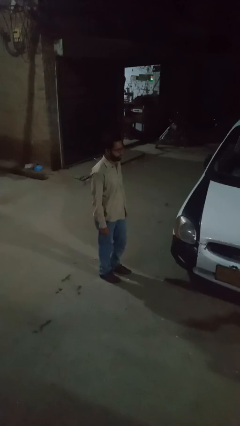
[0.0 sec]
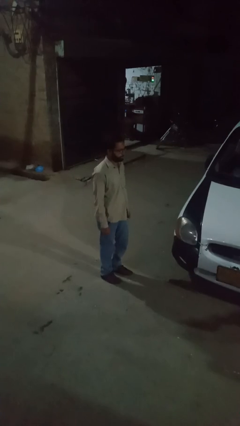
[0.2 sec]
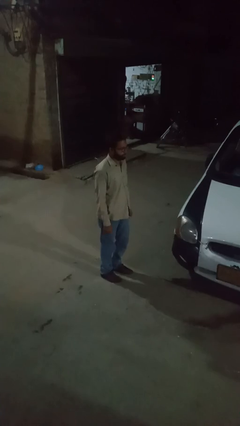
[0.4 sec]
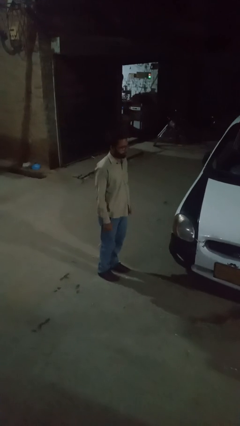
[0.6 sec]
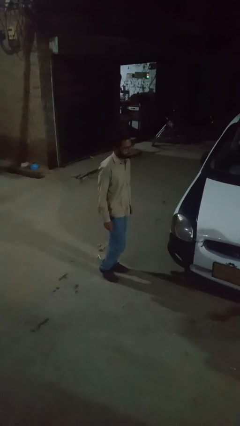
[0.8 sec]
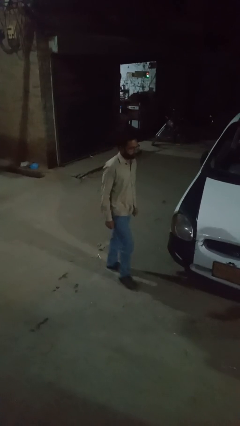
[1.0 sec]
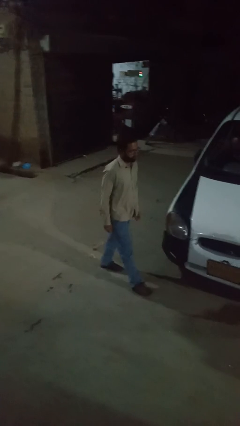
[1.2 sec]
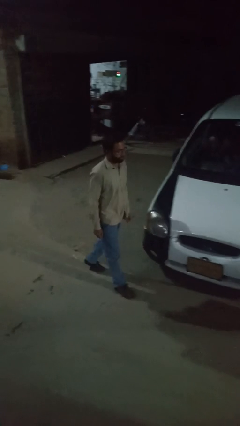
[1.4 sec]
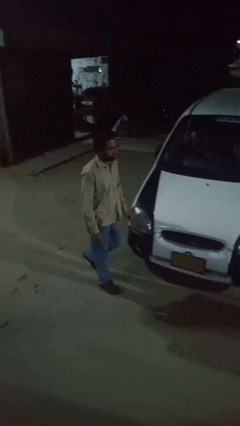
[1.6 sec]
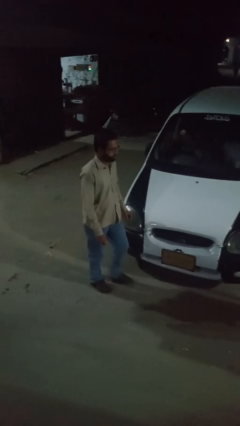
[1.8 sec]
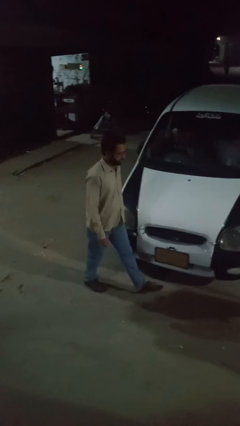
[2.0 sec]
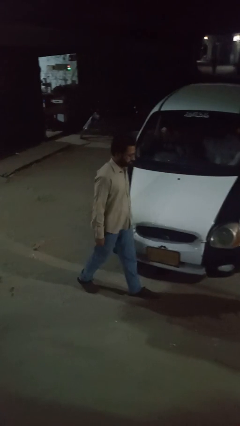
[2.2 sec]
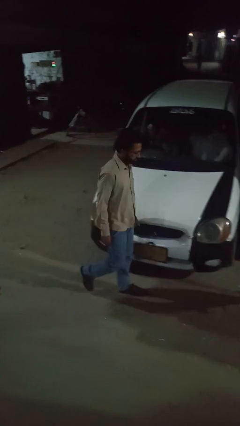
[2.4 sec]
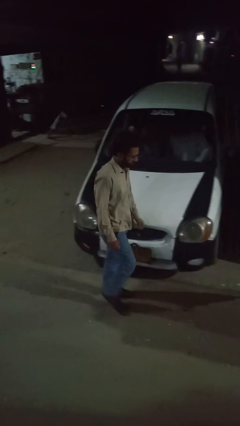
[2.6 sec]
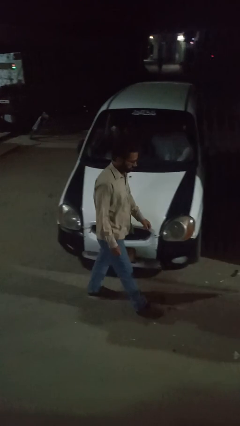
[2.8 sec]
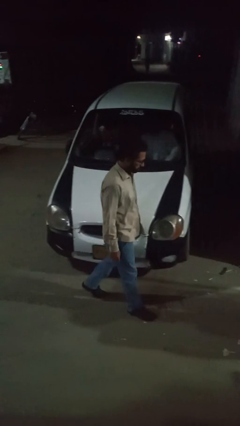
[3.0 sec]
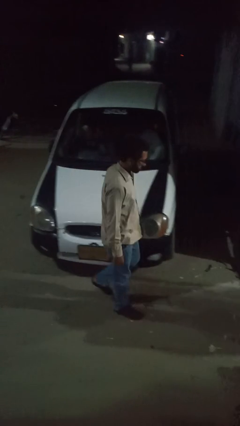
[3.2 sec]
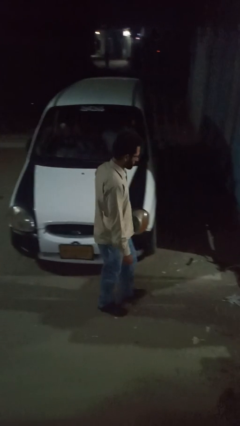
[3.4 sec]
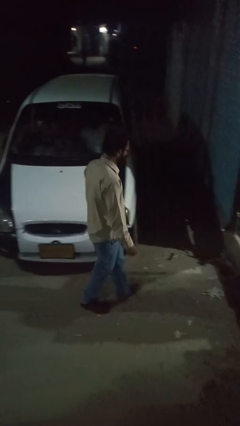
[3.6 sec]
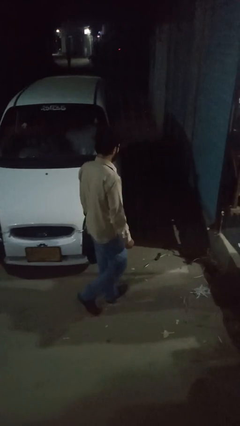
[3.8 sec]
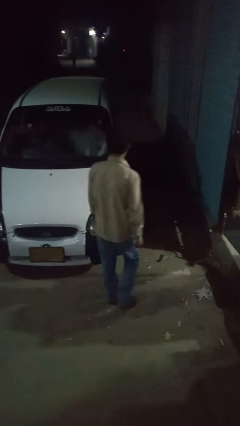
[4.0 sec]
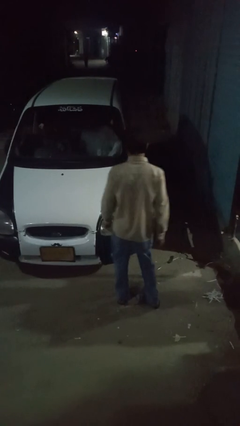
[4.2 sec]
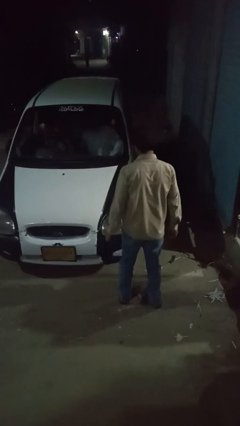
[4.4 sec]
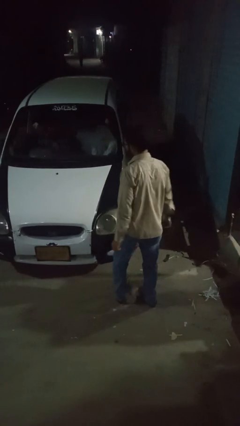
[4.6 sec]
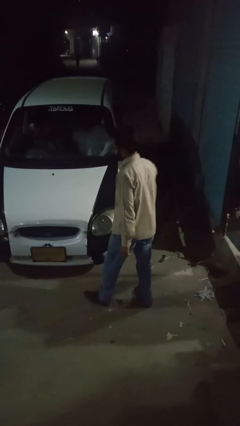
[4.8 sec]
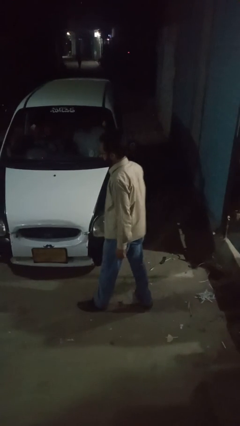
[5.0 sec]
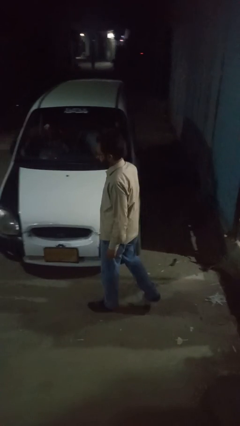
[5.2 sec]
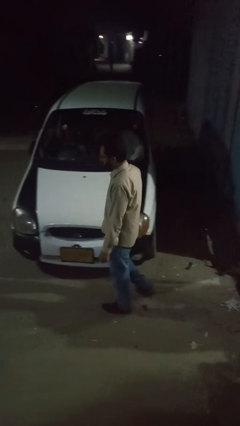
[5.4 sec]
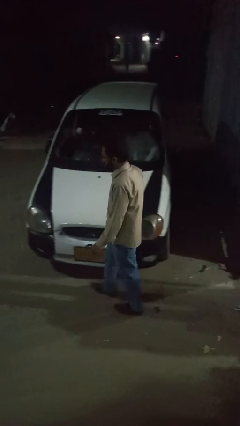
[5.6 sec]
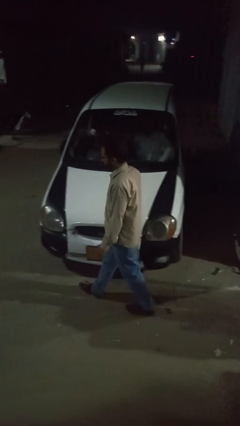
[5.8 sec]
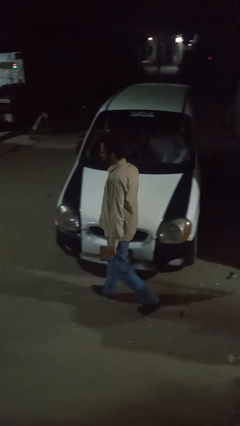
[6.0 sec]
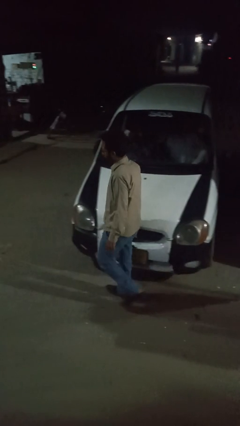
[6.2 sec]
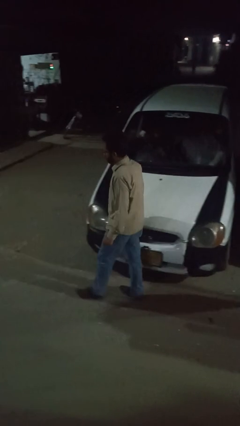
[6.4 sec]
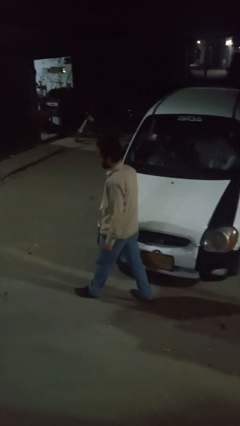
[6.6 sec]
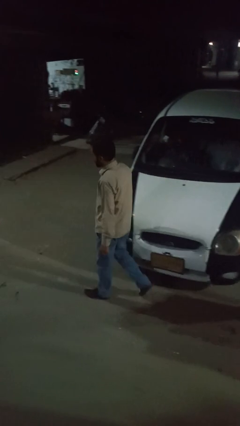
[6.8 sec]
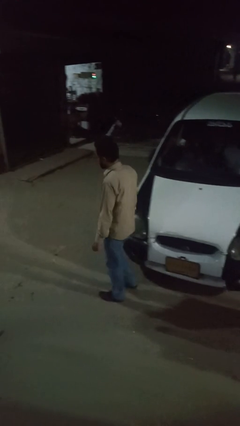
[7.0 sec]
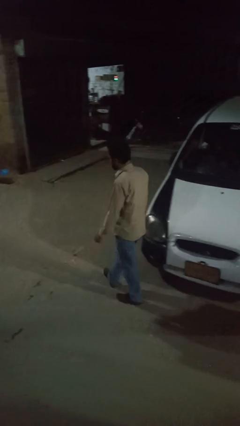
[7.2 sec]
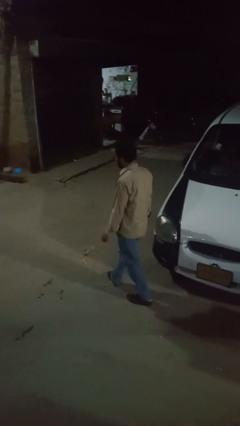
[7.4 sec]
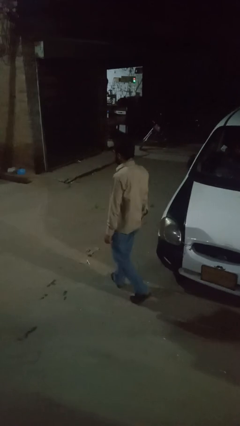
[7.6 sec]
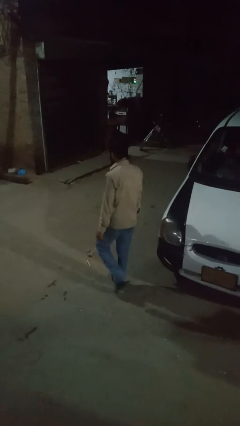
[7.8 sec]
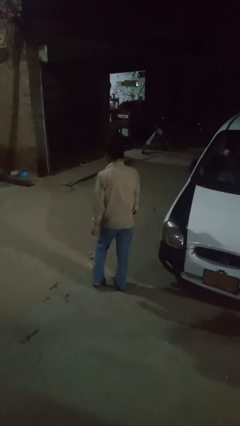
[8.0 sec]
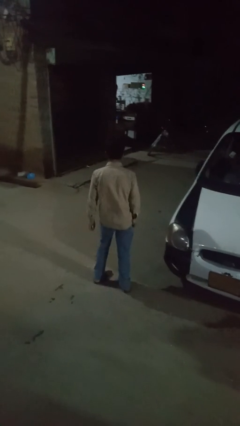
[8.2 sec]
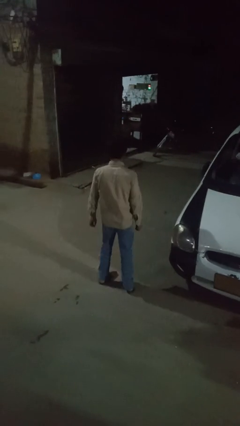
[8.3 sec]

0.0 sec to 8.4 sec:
person walks around car

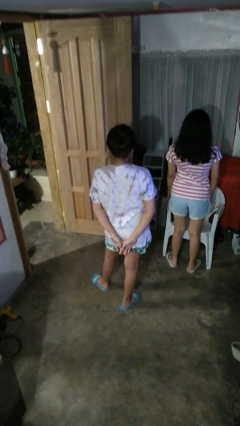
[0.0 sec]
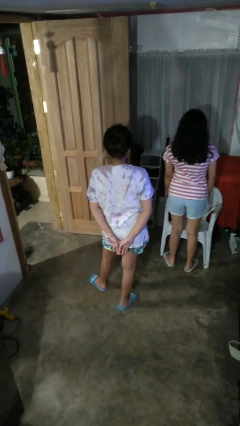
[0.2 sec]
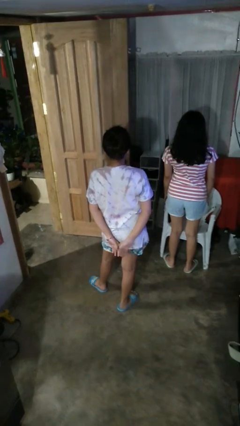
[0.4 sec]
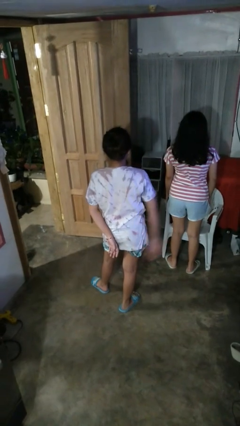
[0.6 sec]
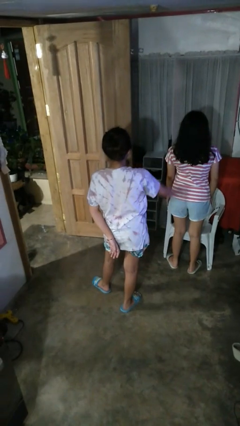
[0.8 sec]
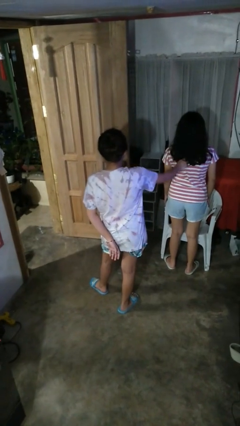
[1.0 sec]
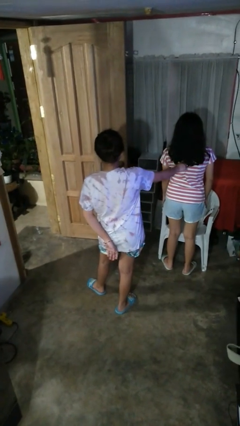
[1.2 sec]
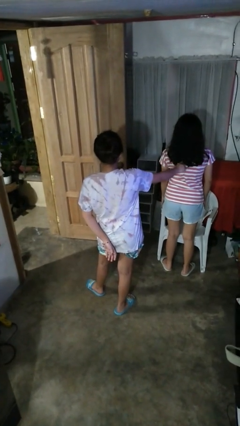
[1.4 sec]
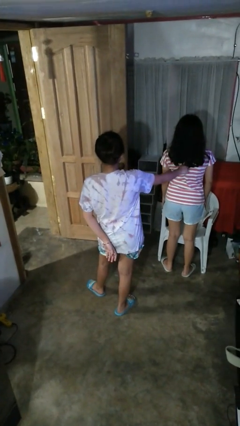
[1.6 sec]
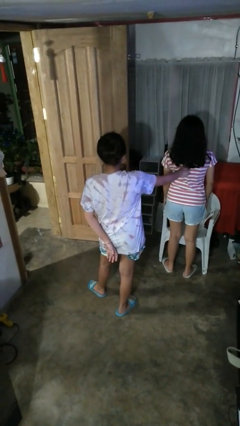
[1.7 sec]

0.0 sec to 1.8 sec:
person touches back of person

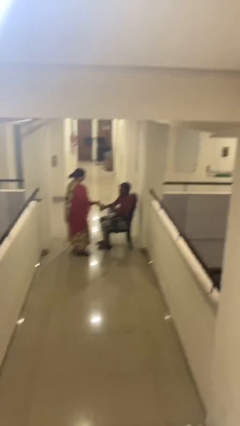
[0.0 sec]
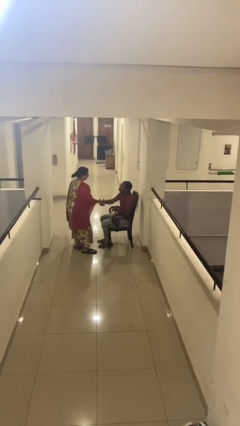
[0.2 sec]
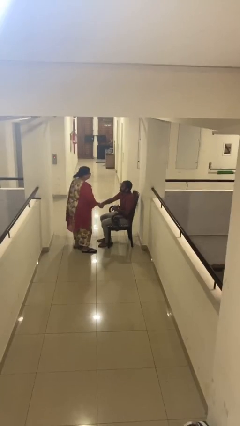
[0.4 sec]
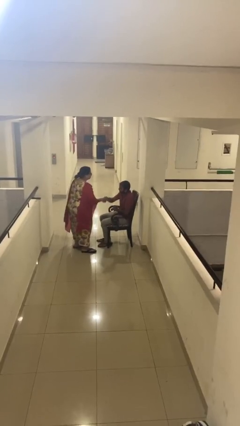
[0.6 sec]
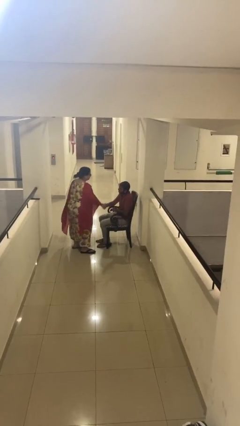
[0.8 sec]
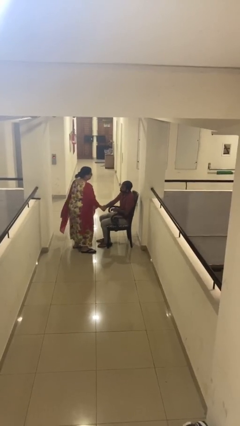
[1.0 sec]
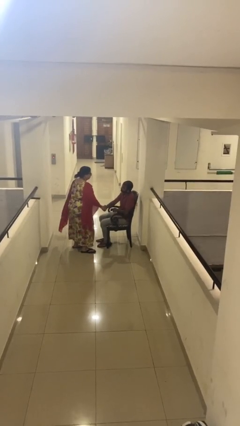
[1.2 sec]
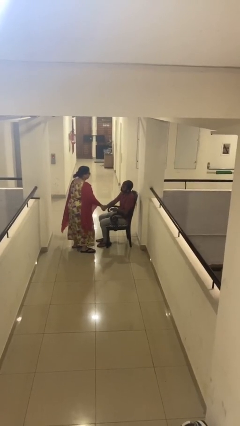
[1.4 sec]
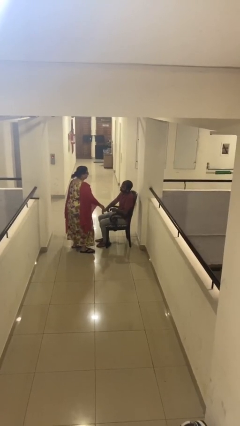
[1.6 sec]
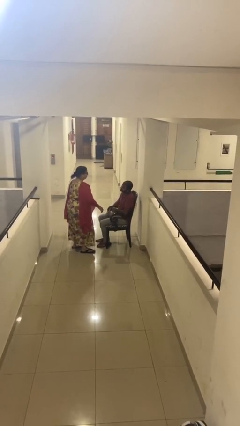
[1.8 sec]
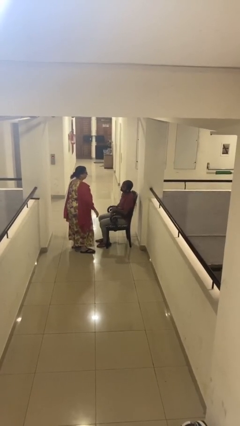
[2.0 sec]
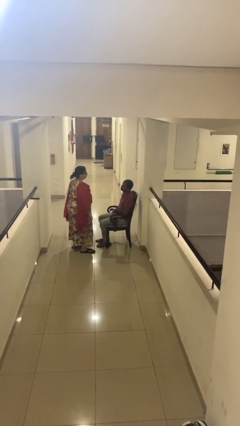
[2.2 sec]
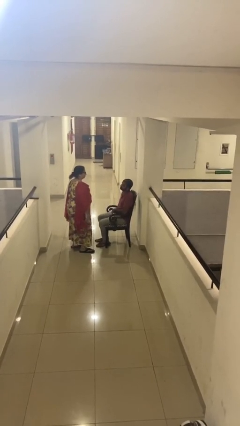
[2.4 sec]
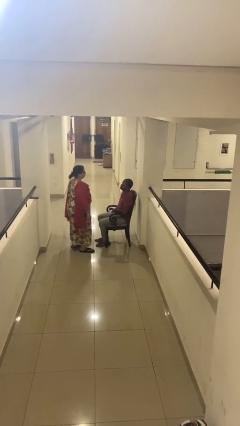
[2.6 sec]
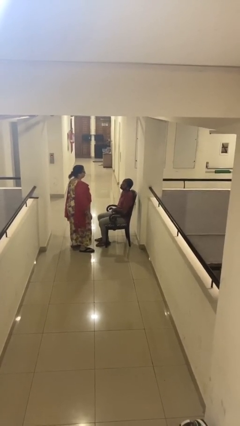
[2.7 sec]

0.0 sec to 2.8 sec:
person shakes hand

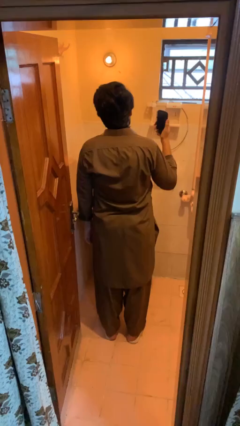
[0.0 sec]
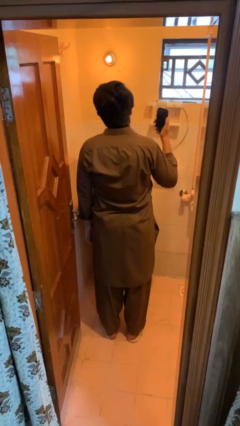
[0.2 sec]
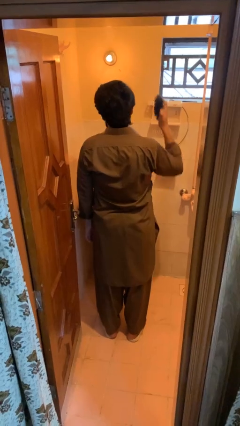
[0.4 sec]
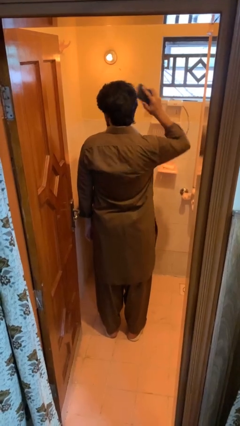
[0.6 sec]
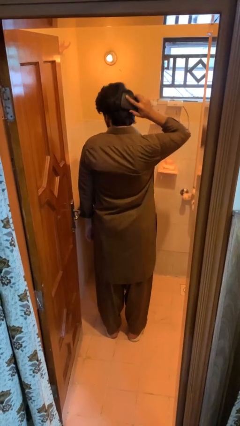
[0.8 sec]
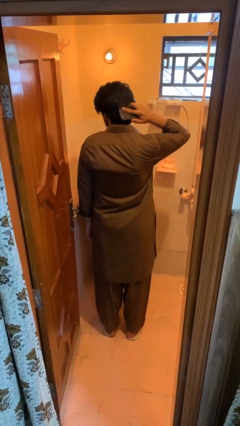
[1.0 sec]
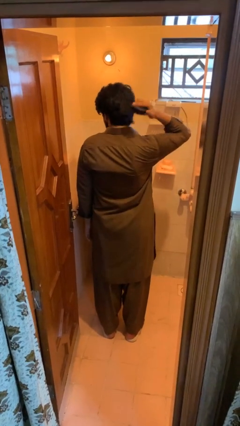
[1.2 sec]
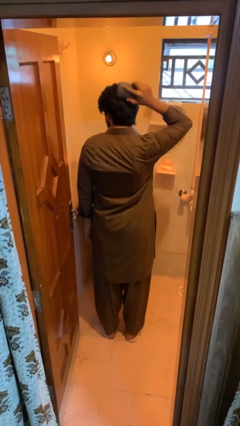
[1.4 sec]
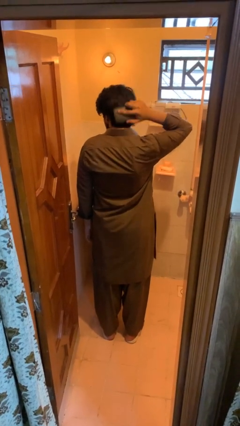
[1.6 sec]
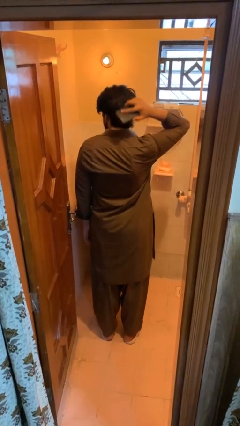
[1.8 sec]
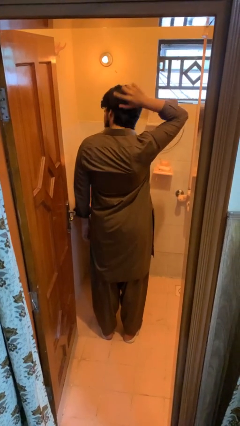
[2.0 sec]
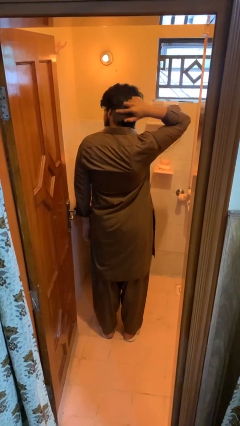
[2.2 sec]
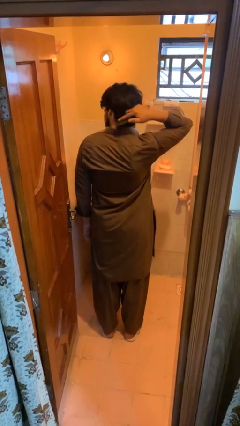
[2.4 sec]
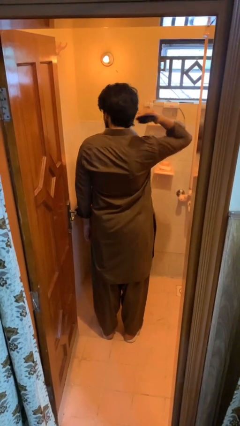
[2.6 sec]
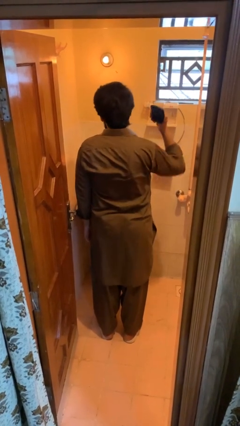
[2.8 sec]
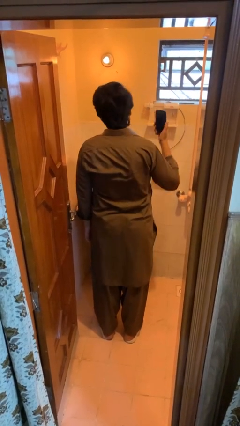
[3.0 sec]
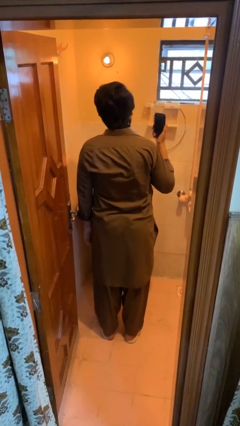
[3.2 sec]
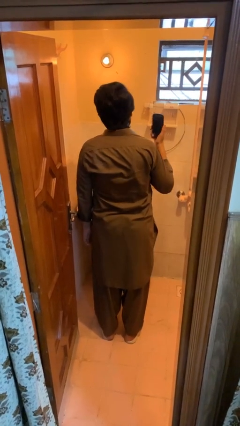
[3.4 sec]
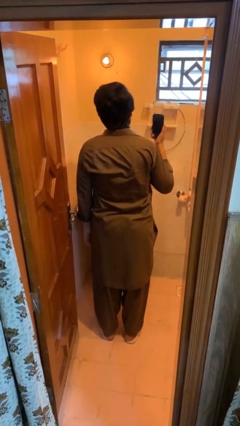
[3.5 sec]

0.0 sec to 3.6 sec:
person brushes hair

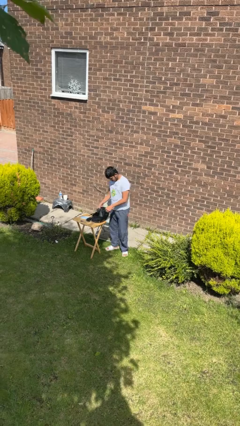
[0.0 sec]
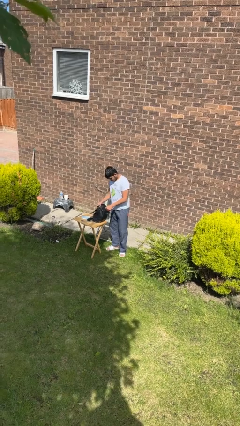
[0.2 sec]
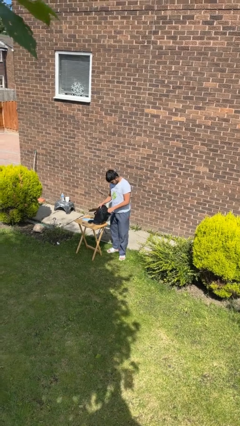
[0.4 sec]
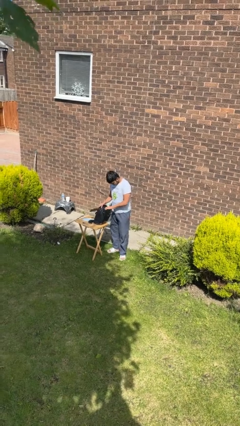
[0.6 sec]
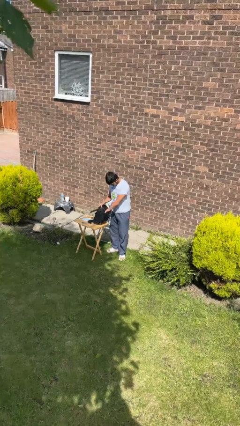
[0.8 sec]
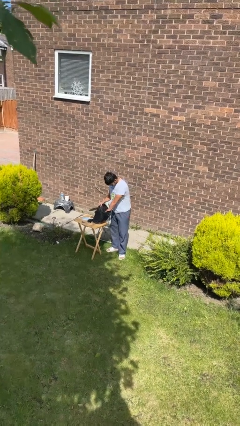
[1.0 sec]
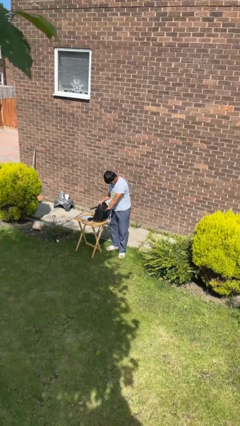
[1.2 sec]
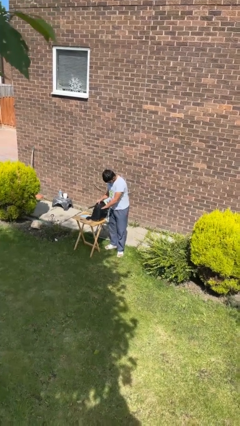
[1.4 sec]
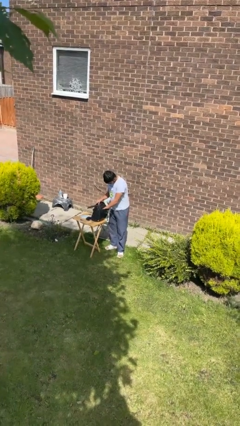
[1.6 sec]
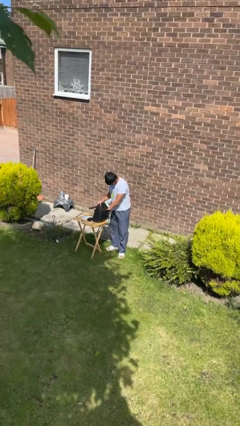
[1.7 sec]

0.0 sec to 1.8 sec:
person searches in backpack
